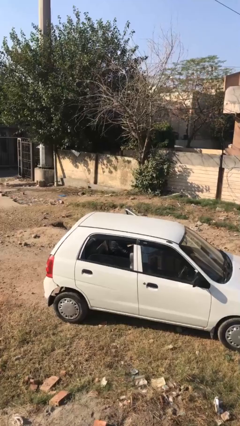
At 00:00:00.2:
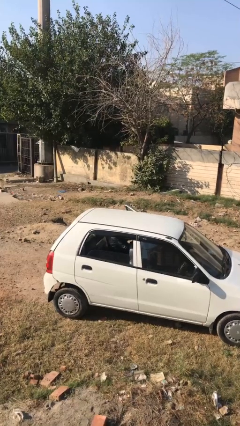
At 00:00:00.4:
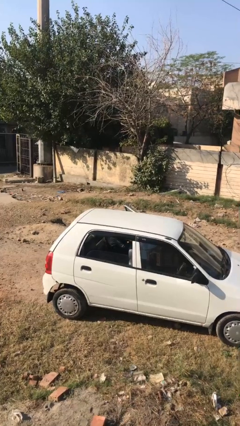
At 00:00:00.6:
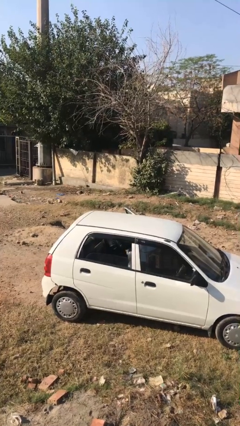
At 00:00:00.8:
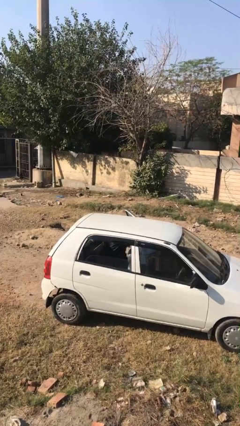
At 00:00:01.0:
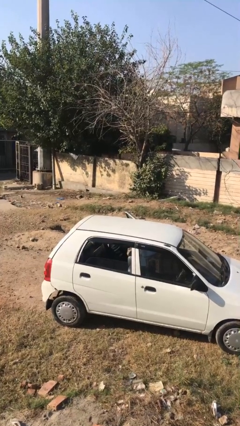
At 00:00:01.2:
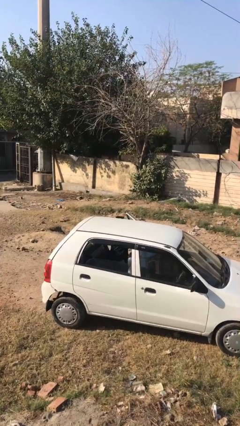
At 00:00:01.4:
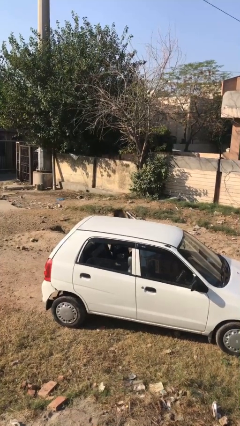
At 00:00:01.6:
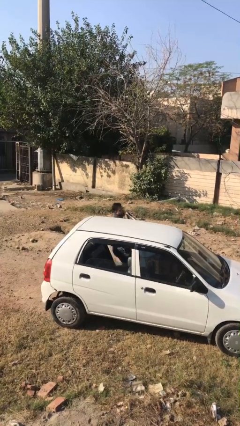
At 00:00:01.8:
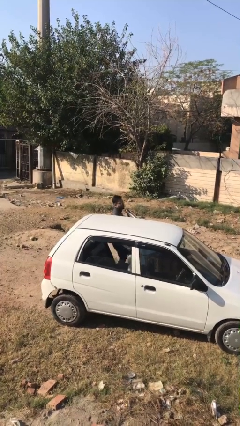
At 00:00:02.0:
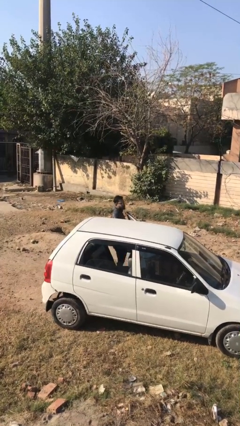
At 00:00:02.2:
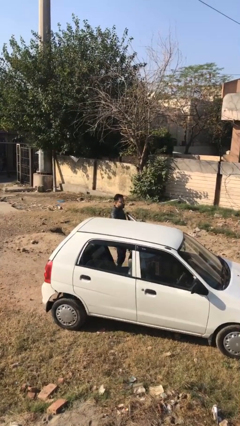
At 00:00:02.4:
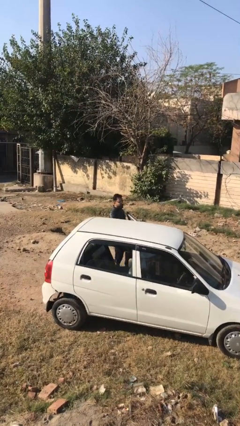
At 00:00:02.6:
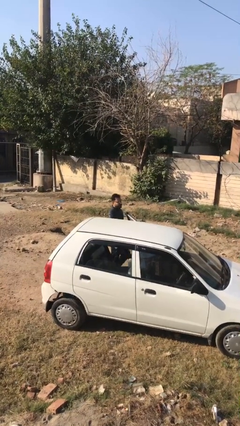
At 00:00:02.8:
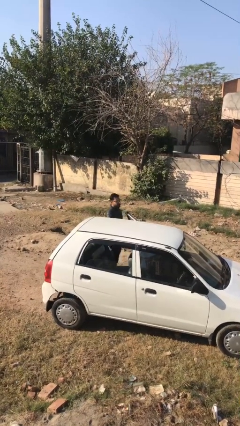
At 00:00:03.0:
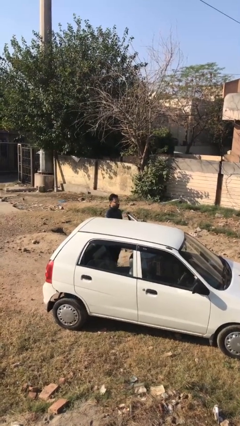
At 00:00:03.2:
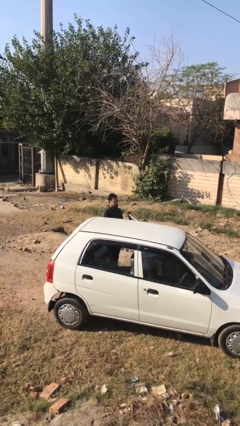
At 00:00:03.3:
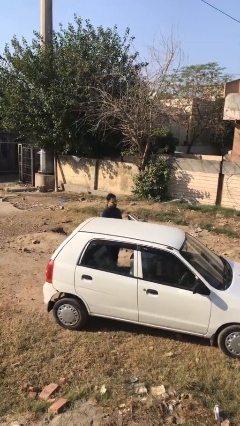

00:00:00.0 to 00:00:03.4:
person exits car

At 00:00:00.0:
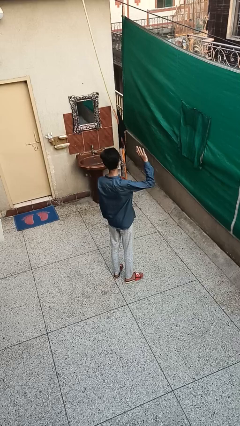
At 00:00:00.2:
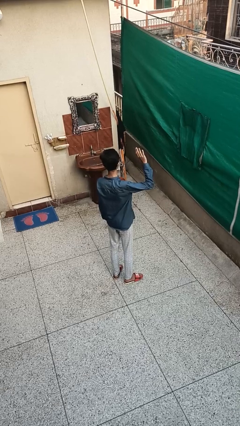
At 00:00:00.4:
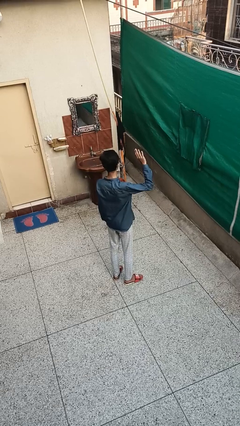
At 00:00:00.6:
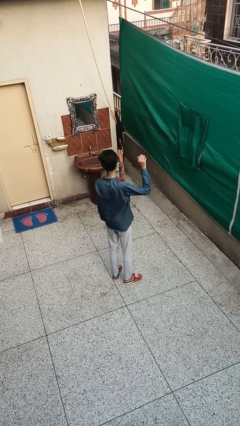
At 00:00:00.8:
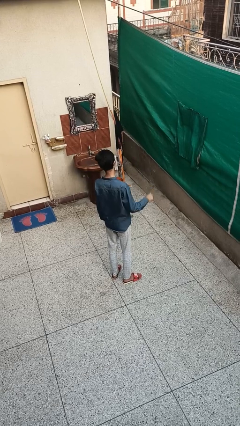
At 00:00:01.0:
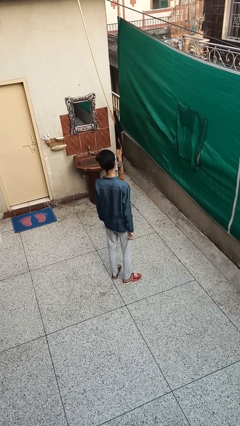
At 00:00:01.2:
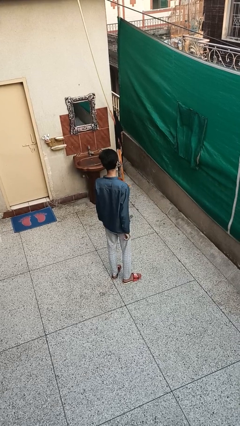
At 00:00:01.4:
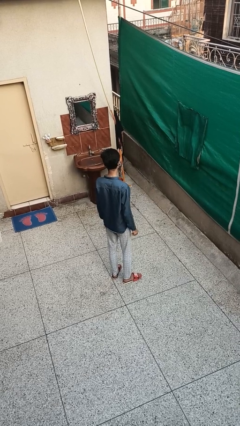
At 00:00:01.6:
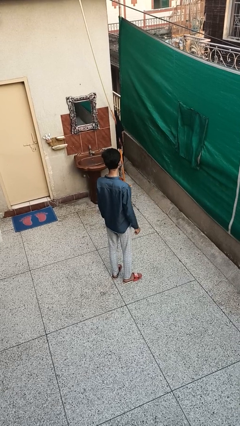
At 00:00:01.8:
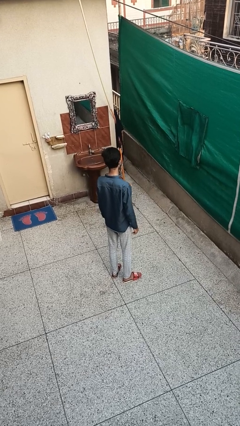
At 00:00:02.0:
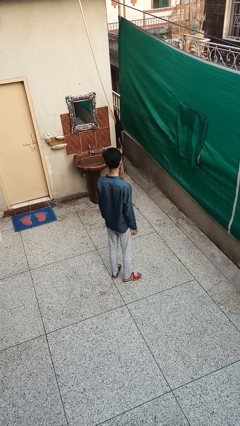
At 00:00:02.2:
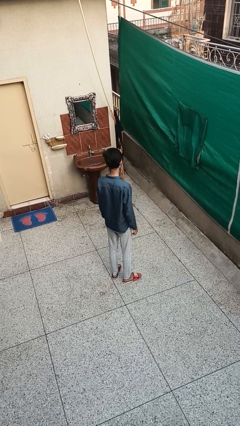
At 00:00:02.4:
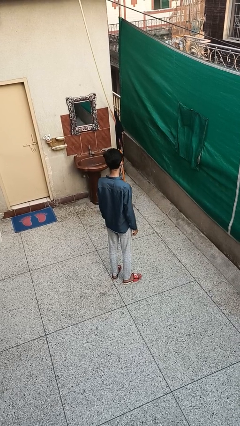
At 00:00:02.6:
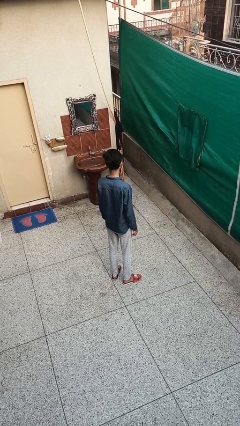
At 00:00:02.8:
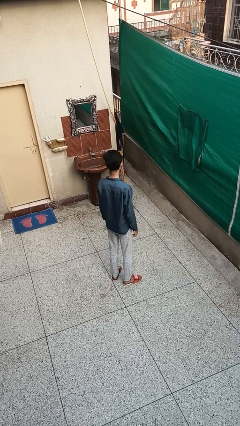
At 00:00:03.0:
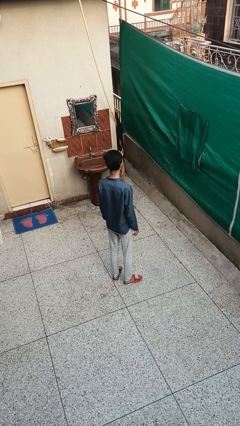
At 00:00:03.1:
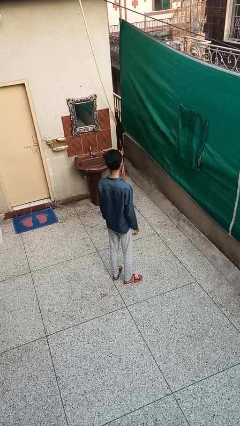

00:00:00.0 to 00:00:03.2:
person gestures lower hand

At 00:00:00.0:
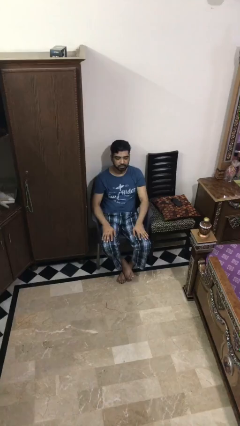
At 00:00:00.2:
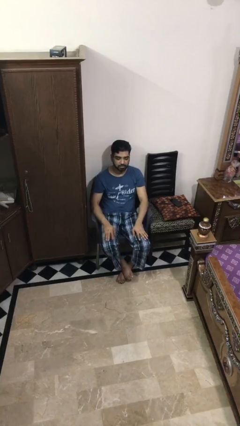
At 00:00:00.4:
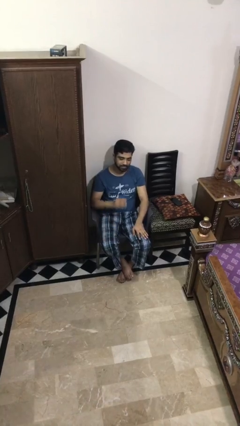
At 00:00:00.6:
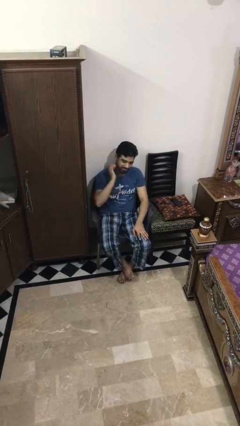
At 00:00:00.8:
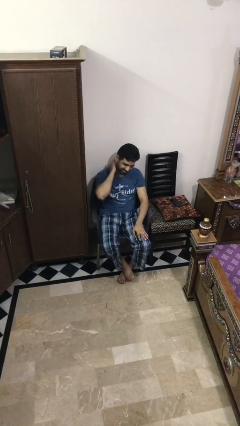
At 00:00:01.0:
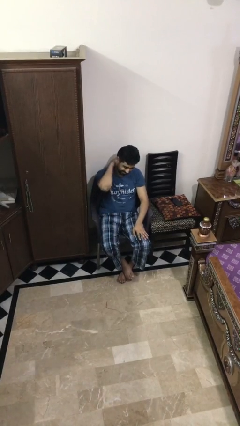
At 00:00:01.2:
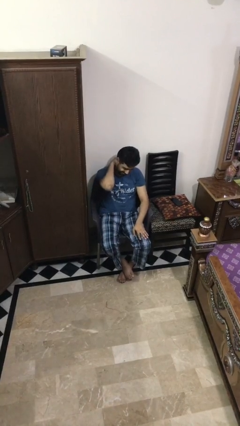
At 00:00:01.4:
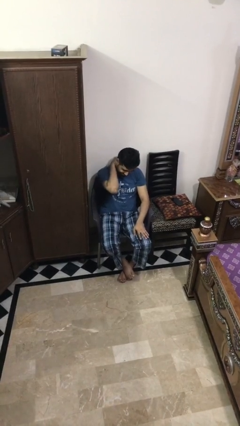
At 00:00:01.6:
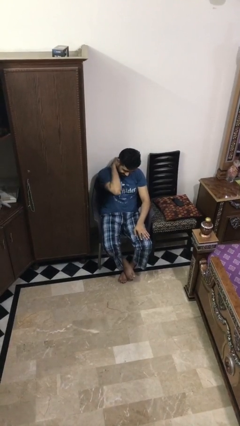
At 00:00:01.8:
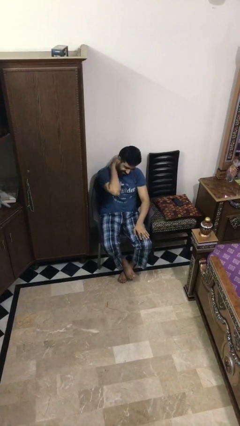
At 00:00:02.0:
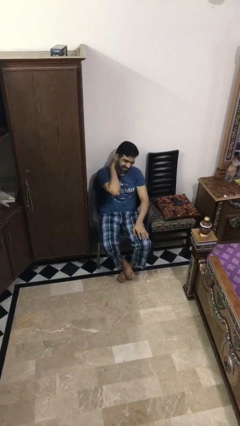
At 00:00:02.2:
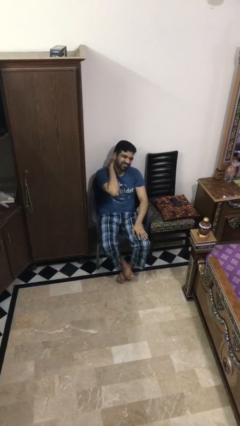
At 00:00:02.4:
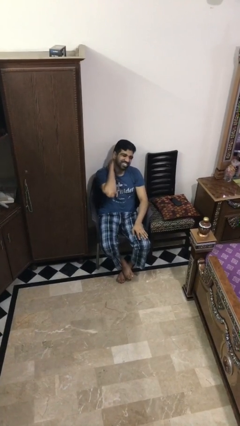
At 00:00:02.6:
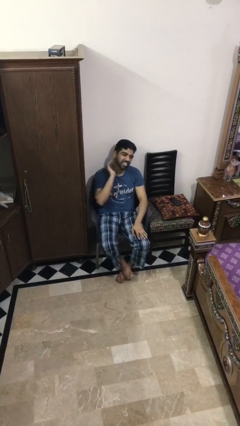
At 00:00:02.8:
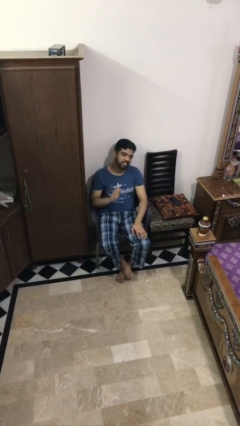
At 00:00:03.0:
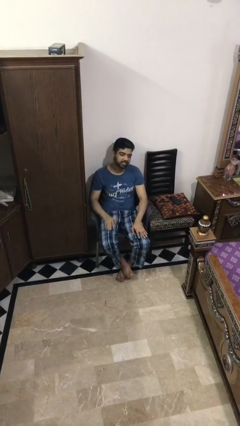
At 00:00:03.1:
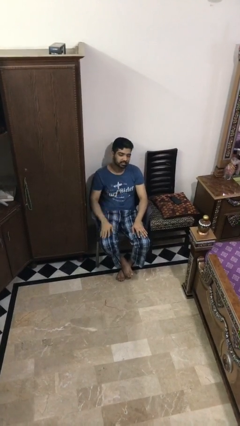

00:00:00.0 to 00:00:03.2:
person rubs neck

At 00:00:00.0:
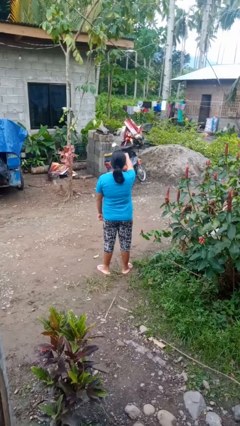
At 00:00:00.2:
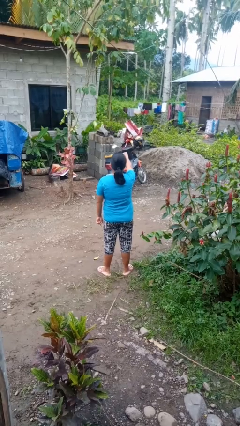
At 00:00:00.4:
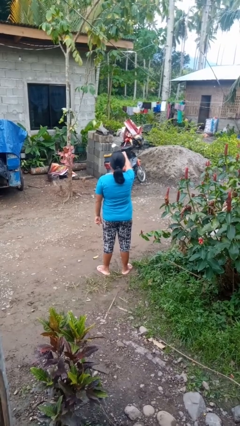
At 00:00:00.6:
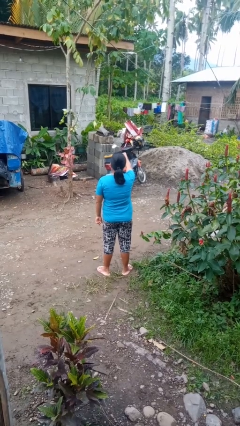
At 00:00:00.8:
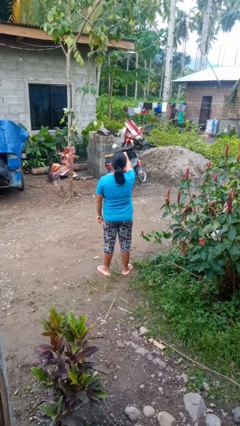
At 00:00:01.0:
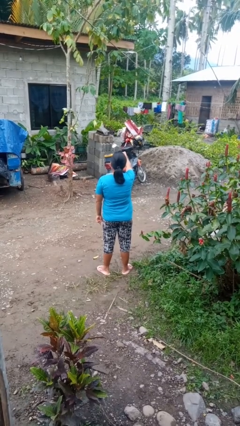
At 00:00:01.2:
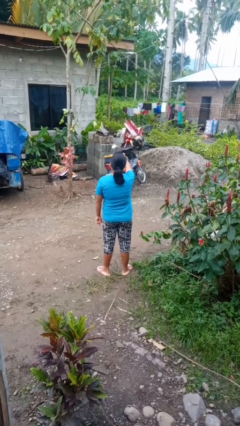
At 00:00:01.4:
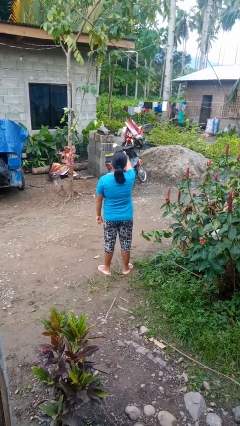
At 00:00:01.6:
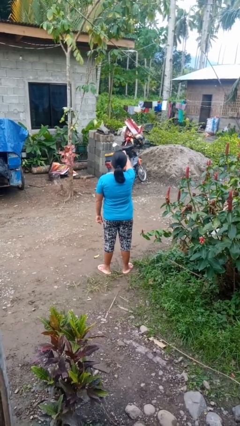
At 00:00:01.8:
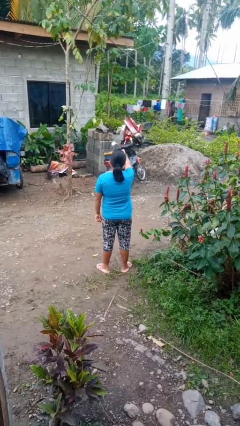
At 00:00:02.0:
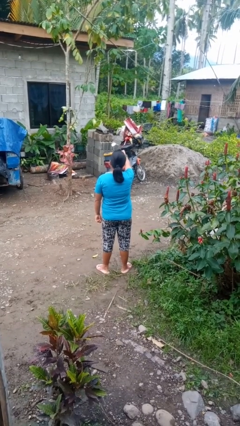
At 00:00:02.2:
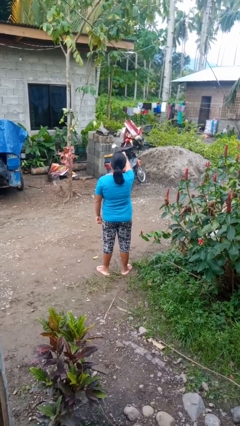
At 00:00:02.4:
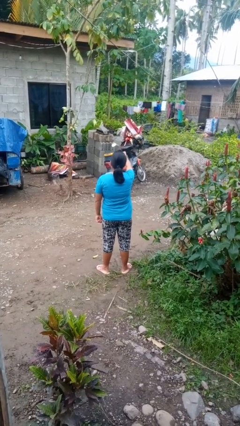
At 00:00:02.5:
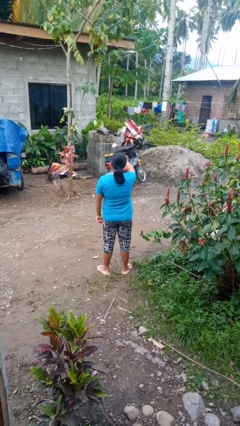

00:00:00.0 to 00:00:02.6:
person gestures thumbs down

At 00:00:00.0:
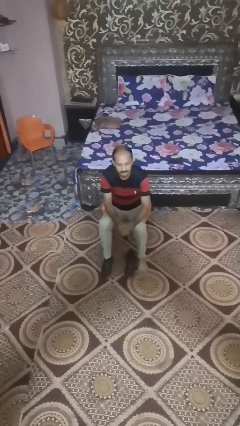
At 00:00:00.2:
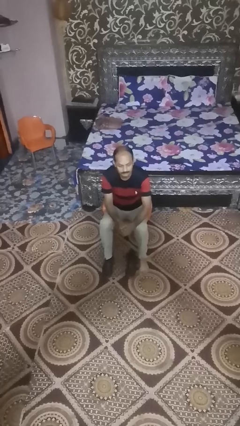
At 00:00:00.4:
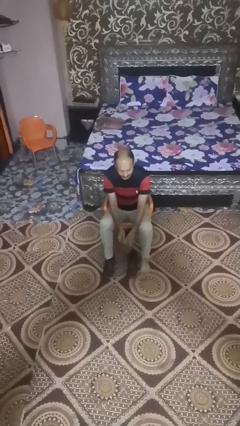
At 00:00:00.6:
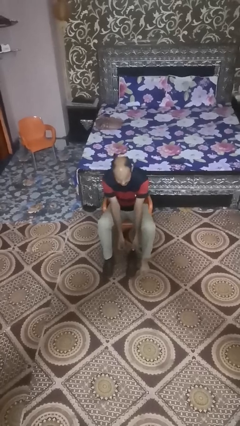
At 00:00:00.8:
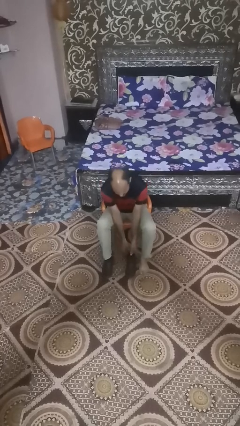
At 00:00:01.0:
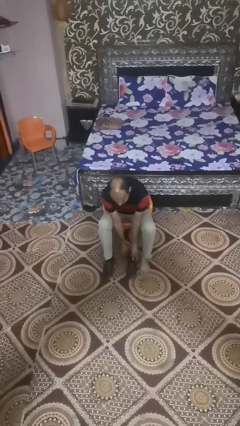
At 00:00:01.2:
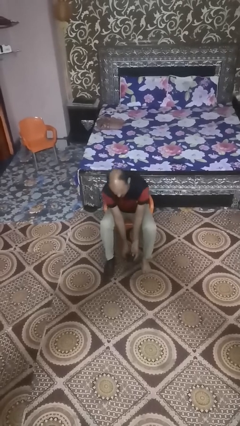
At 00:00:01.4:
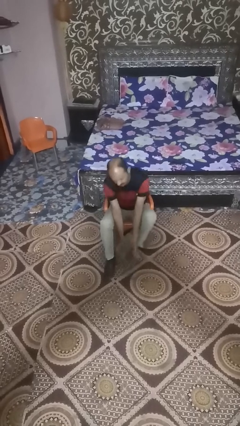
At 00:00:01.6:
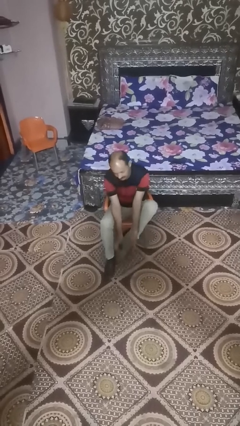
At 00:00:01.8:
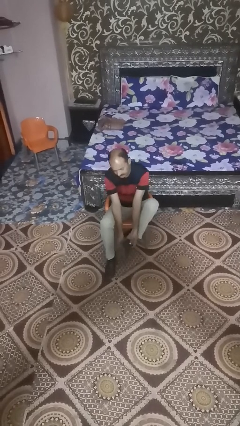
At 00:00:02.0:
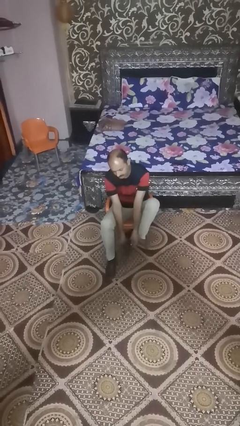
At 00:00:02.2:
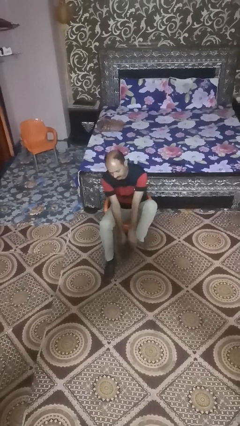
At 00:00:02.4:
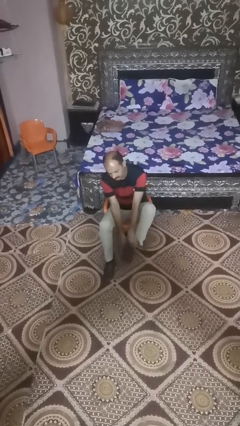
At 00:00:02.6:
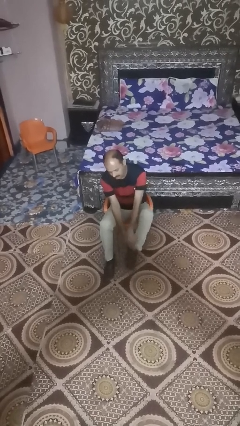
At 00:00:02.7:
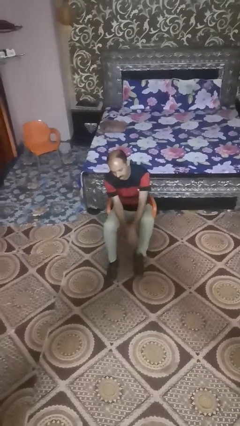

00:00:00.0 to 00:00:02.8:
person puts on boots

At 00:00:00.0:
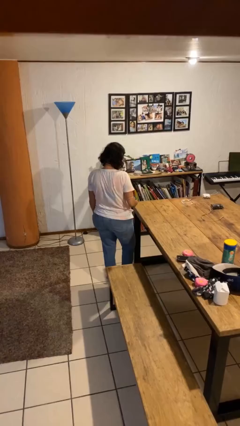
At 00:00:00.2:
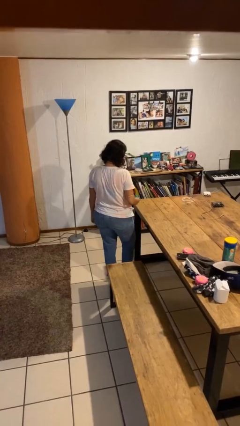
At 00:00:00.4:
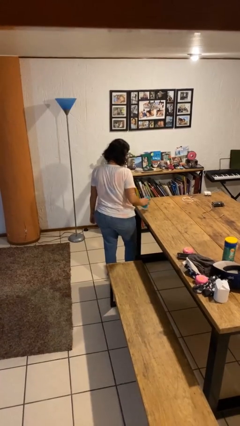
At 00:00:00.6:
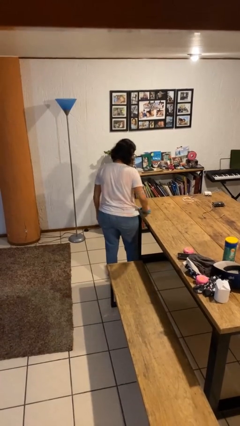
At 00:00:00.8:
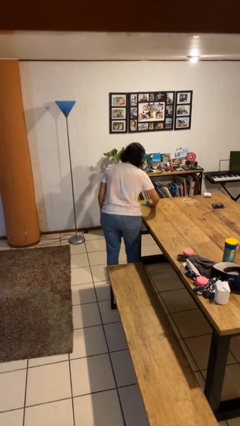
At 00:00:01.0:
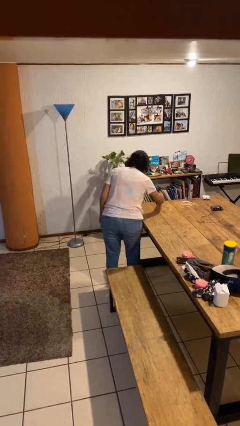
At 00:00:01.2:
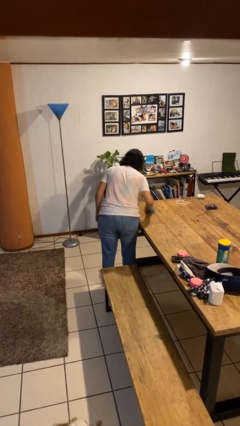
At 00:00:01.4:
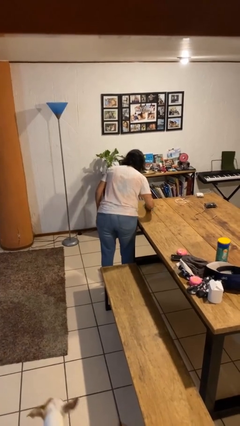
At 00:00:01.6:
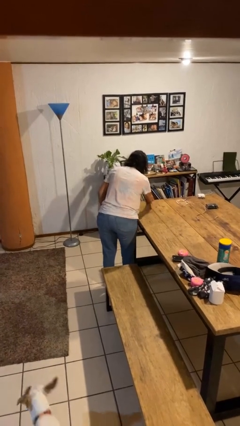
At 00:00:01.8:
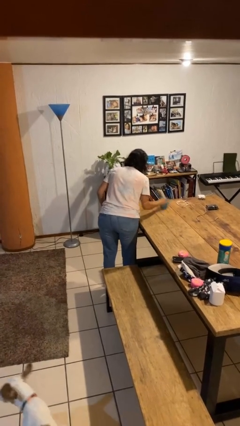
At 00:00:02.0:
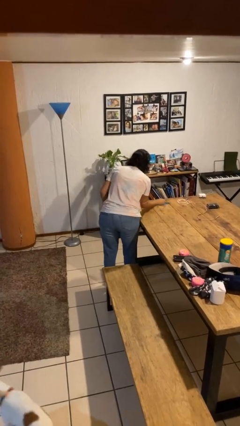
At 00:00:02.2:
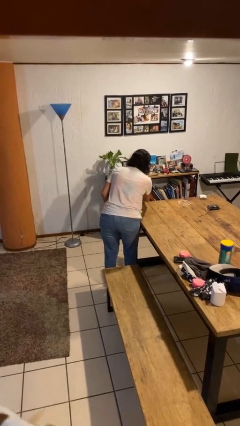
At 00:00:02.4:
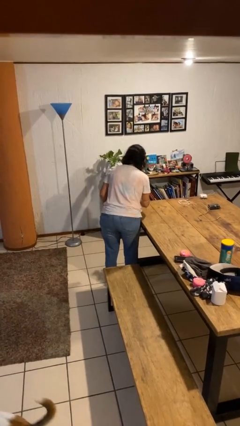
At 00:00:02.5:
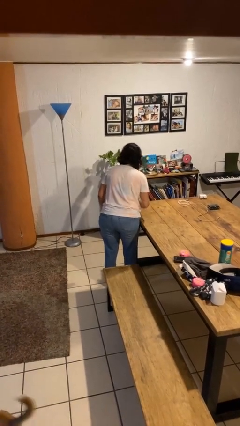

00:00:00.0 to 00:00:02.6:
person cleans table with rag
